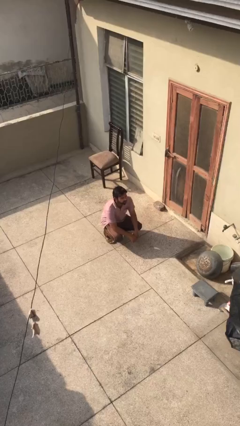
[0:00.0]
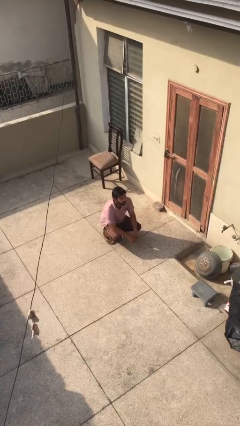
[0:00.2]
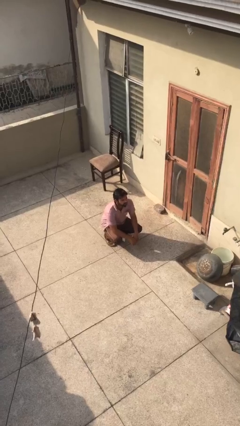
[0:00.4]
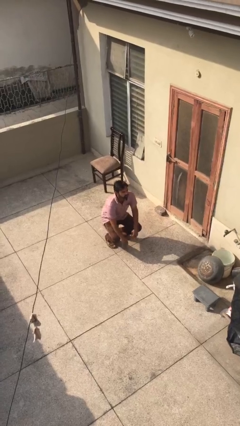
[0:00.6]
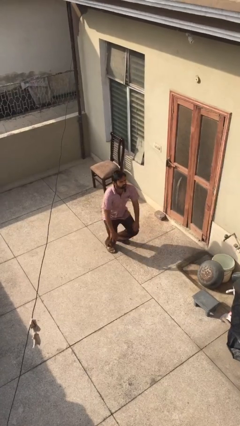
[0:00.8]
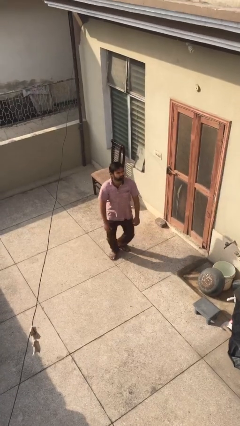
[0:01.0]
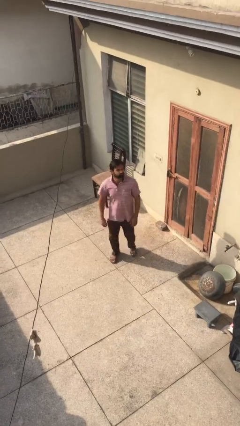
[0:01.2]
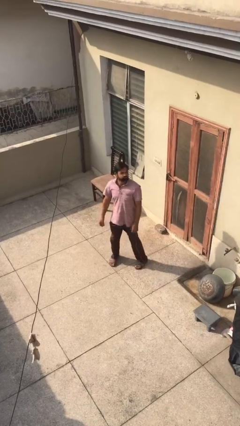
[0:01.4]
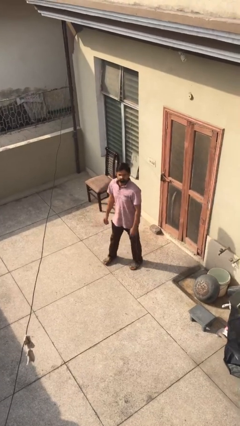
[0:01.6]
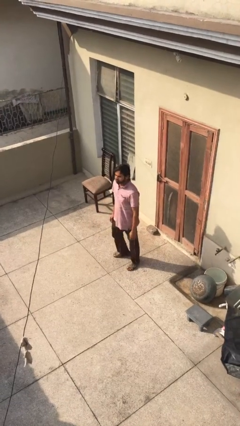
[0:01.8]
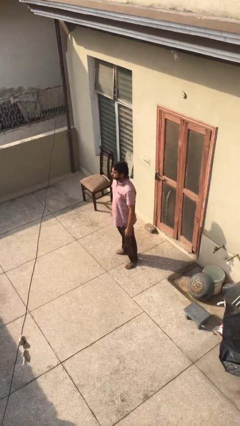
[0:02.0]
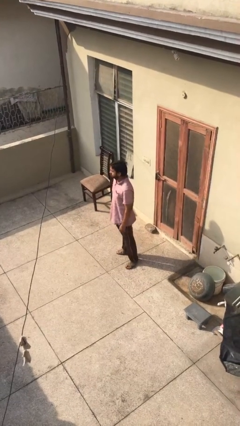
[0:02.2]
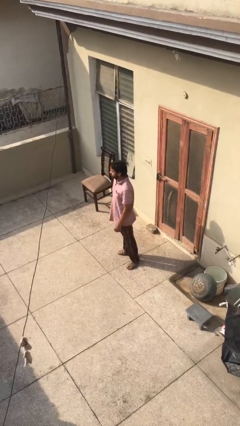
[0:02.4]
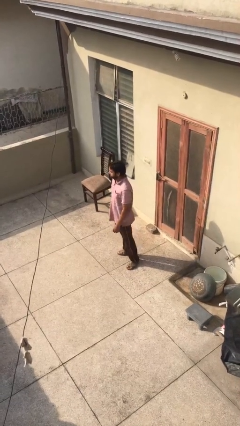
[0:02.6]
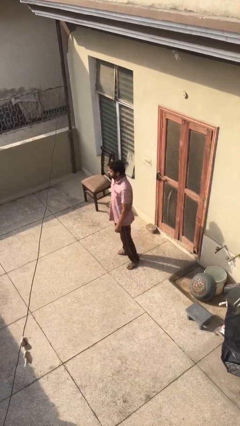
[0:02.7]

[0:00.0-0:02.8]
person stands up

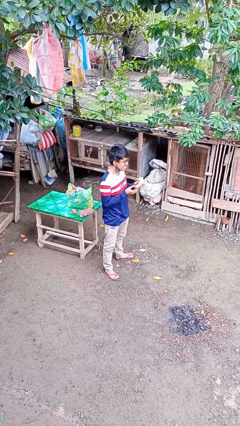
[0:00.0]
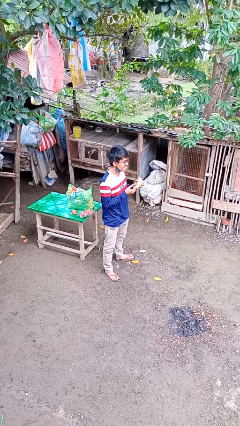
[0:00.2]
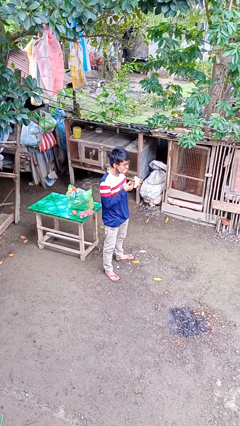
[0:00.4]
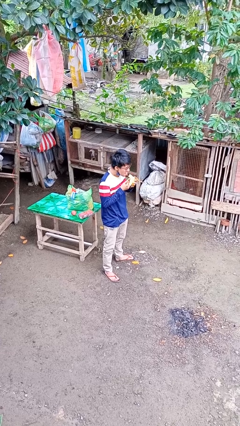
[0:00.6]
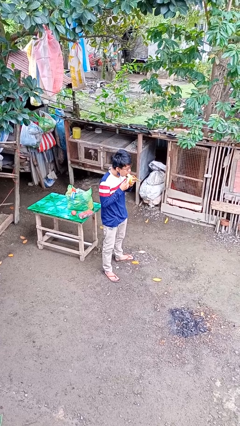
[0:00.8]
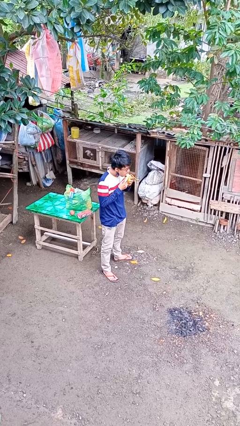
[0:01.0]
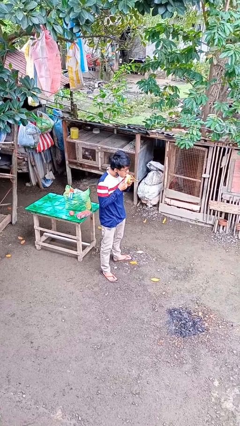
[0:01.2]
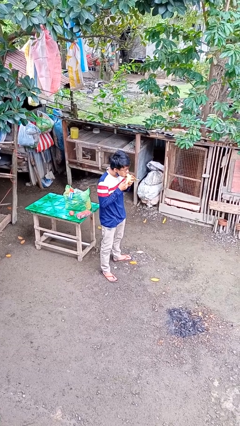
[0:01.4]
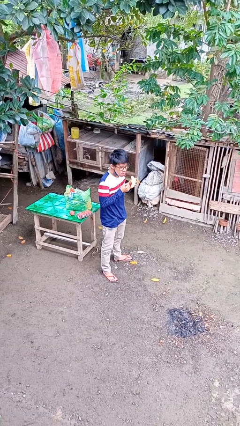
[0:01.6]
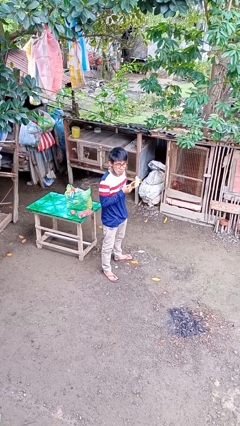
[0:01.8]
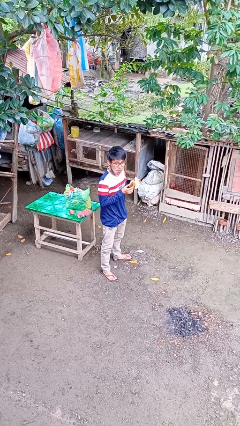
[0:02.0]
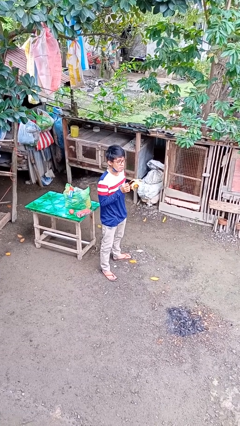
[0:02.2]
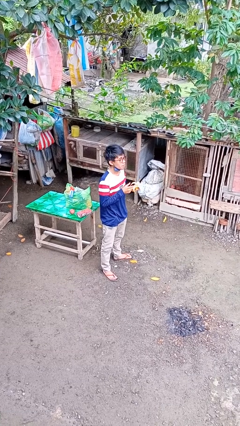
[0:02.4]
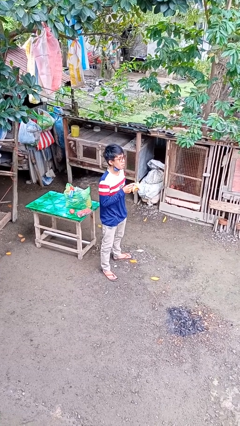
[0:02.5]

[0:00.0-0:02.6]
person eats banana

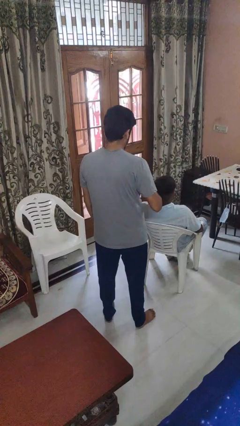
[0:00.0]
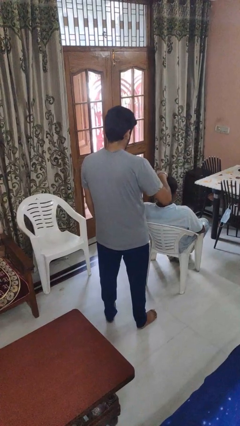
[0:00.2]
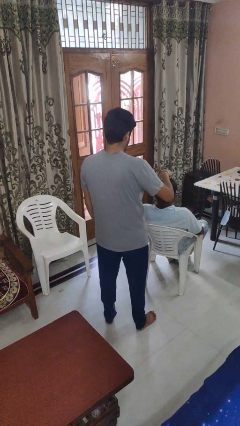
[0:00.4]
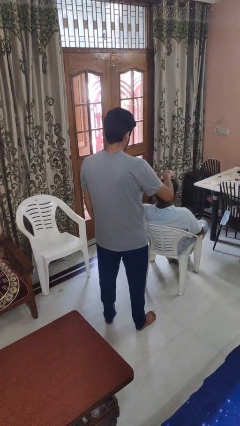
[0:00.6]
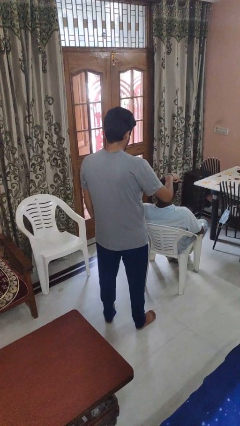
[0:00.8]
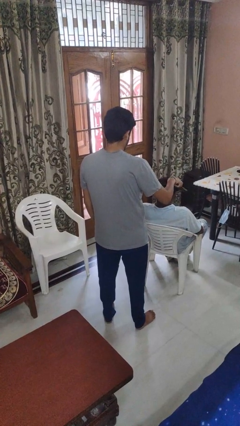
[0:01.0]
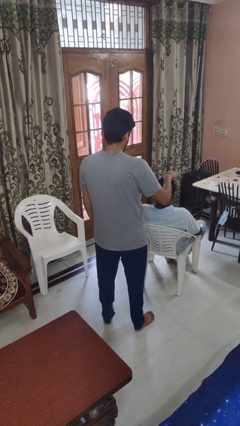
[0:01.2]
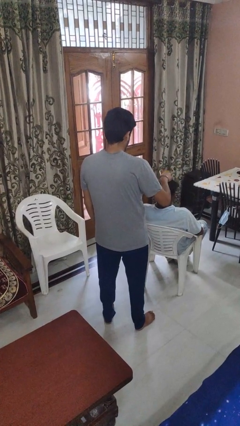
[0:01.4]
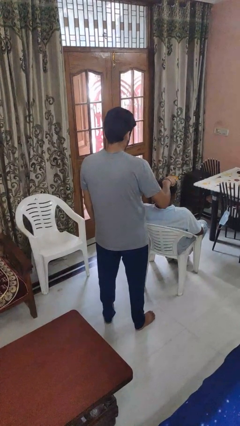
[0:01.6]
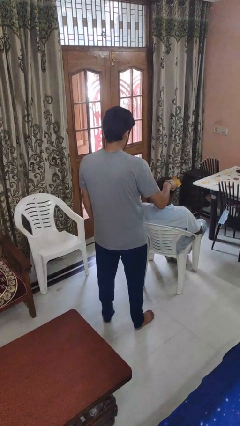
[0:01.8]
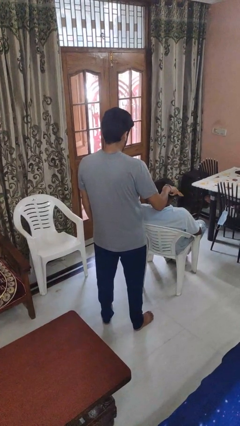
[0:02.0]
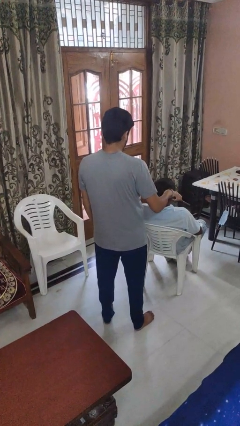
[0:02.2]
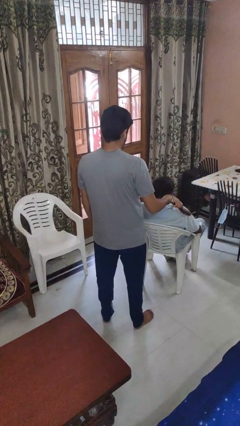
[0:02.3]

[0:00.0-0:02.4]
person brushes hair of person

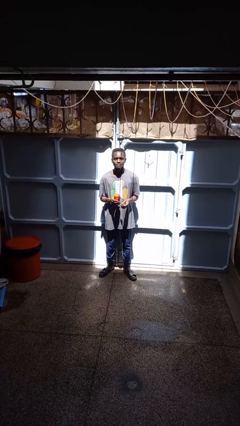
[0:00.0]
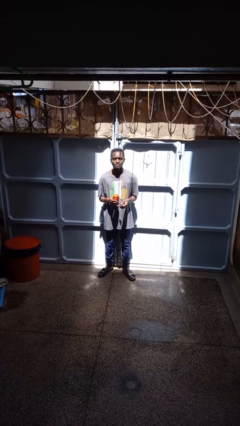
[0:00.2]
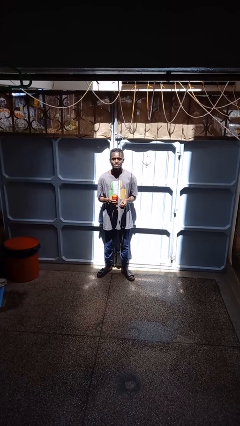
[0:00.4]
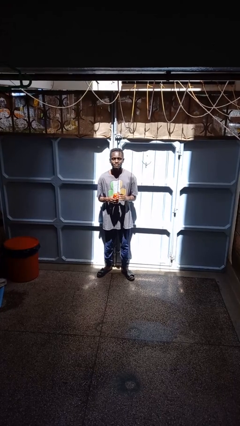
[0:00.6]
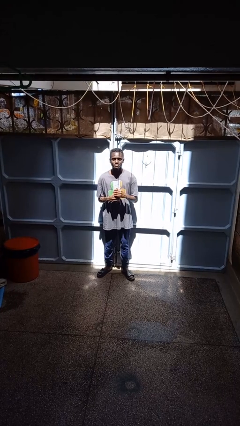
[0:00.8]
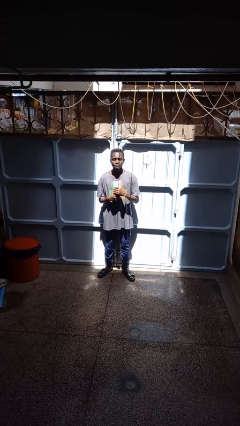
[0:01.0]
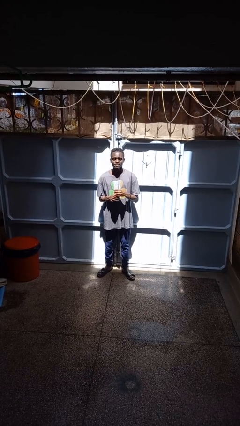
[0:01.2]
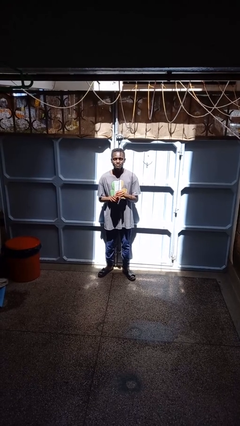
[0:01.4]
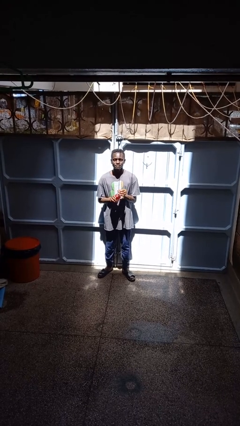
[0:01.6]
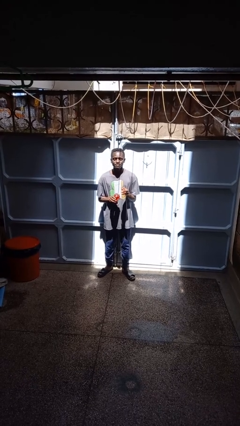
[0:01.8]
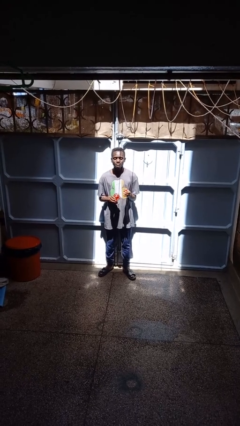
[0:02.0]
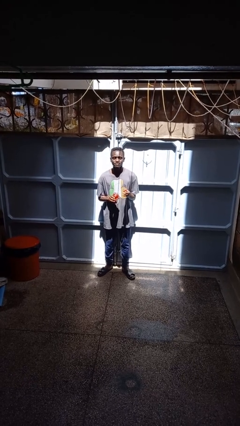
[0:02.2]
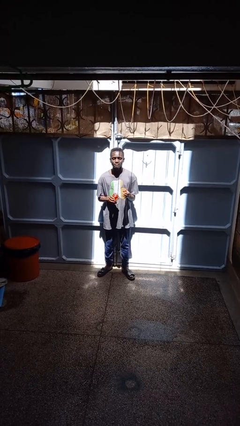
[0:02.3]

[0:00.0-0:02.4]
person opens jar

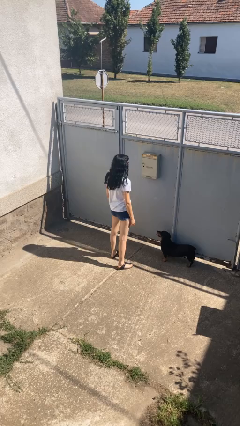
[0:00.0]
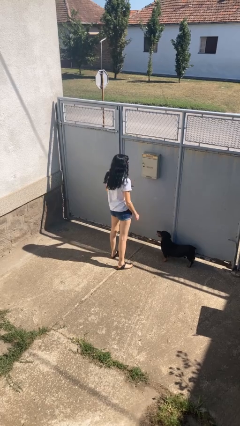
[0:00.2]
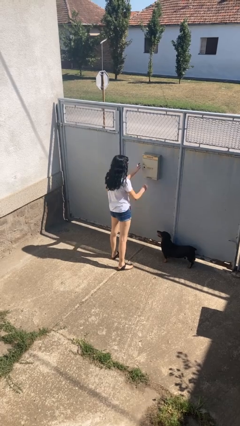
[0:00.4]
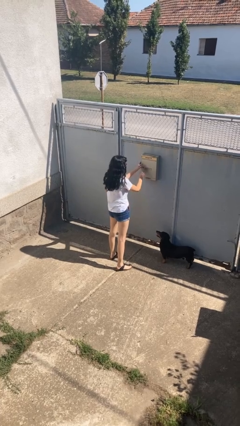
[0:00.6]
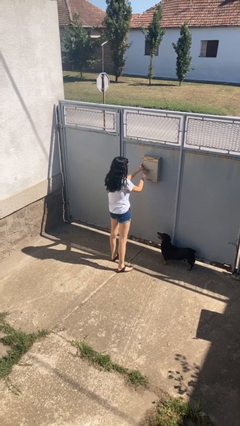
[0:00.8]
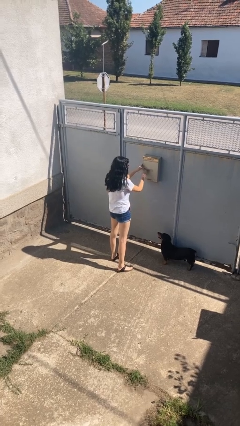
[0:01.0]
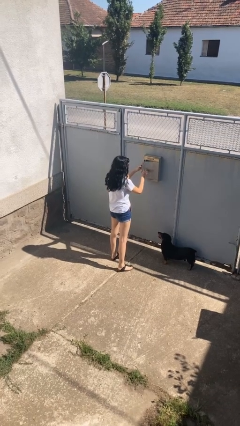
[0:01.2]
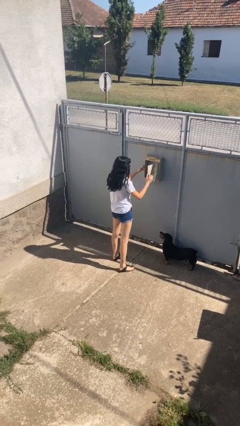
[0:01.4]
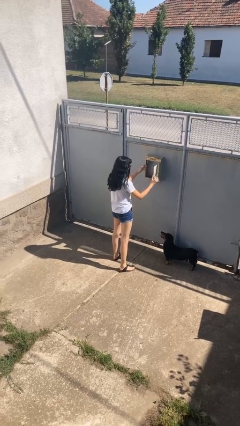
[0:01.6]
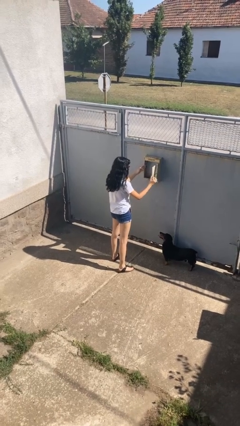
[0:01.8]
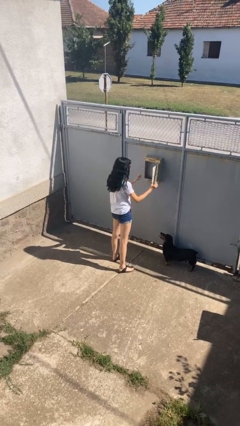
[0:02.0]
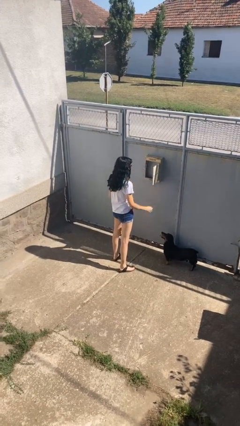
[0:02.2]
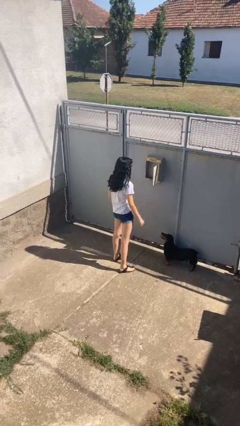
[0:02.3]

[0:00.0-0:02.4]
person opens mailbox

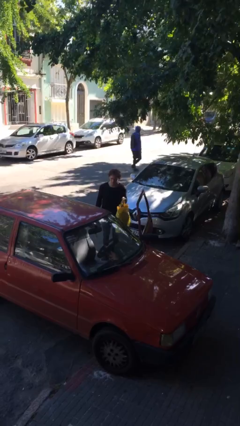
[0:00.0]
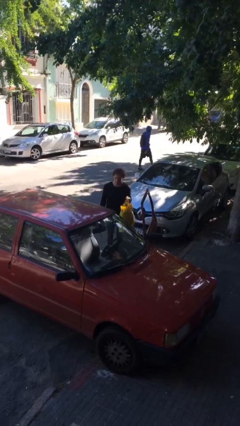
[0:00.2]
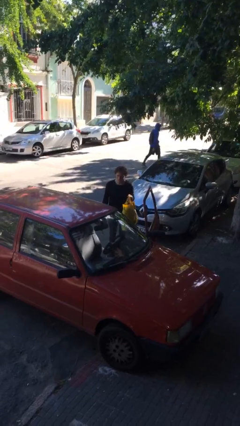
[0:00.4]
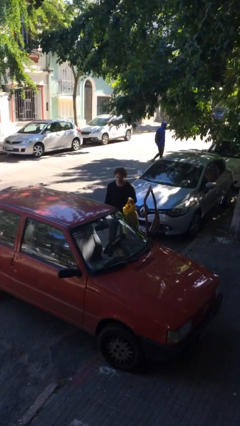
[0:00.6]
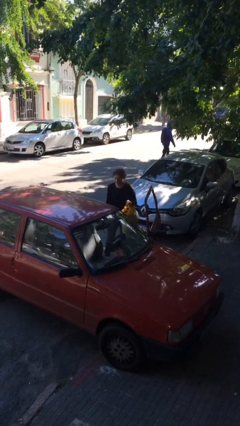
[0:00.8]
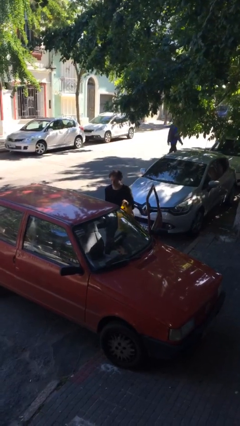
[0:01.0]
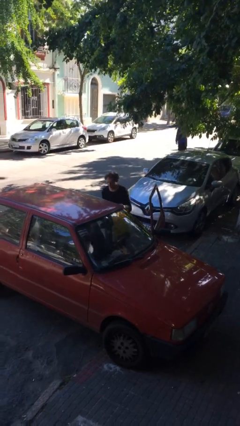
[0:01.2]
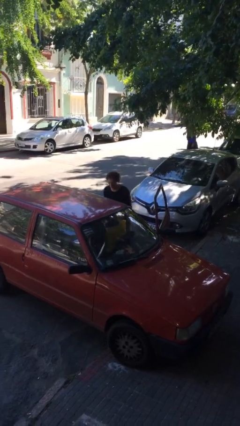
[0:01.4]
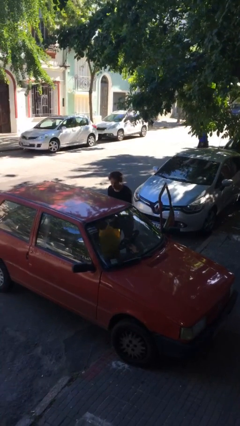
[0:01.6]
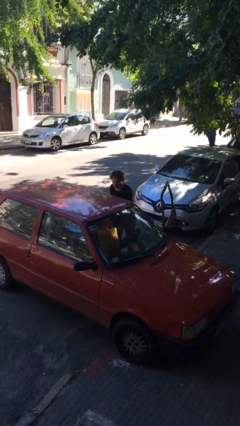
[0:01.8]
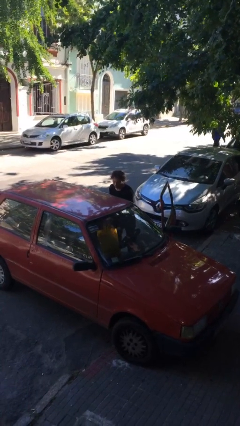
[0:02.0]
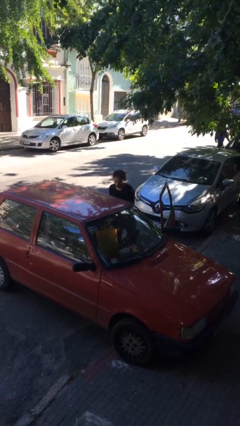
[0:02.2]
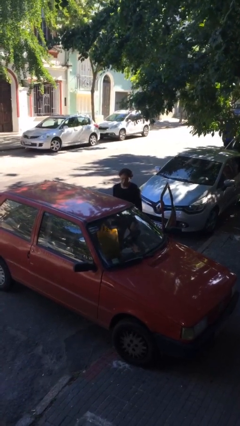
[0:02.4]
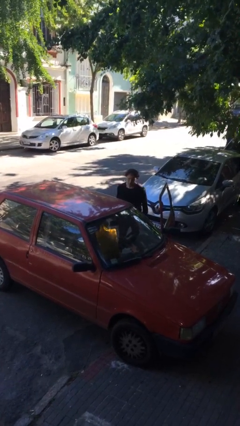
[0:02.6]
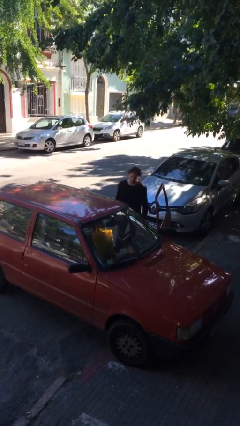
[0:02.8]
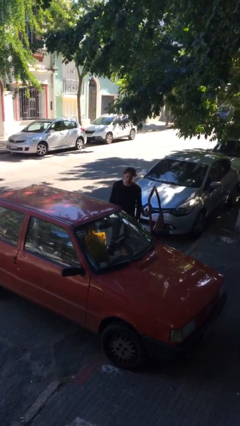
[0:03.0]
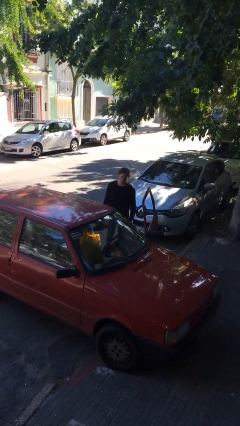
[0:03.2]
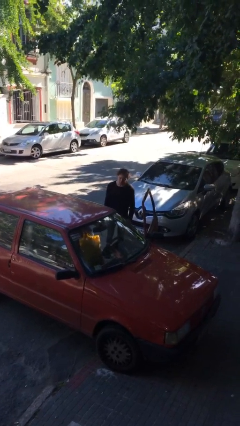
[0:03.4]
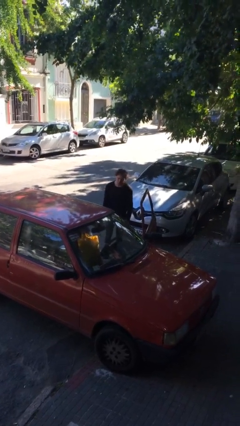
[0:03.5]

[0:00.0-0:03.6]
person loads car

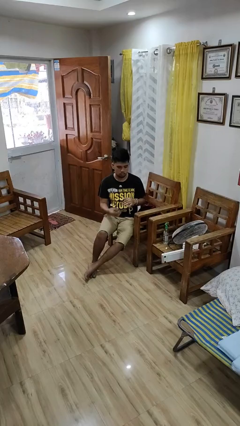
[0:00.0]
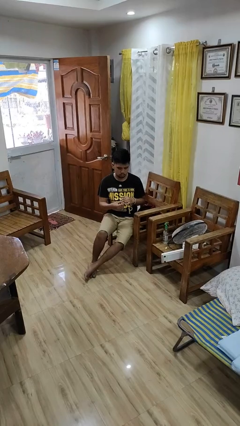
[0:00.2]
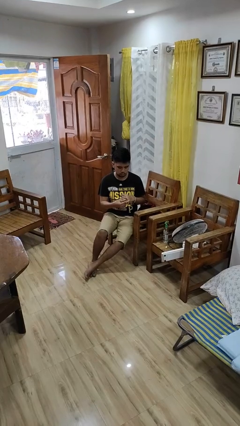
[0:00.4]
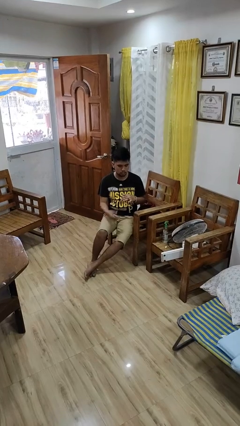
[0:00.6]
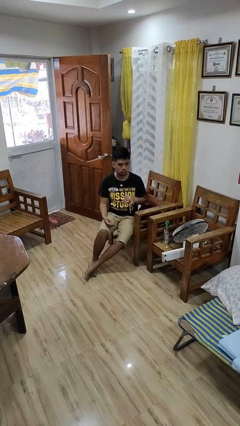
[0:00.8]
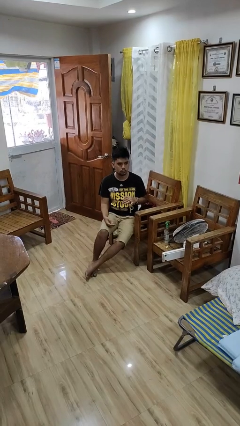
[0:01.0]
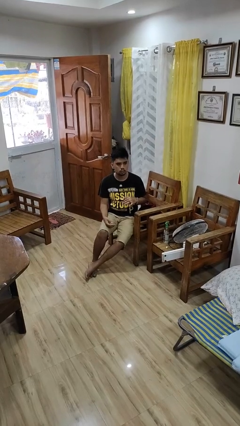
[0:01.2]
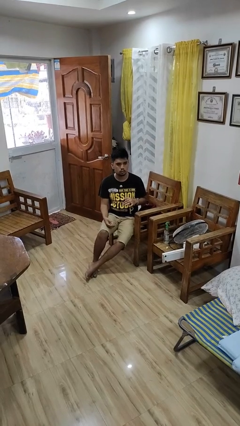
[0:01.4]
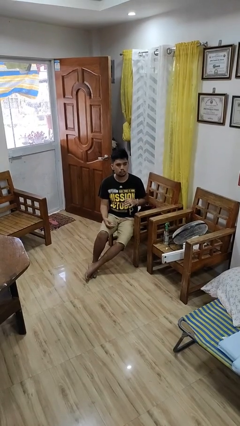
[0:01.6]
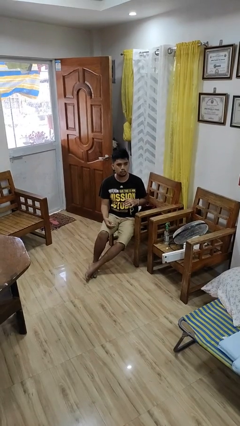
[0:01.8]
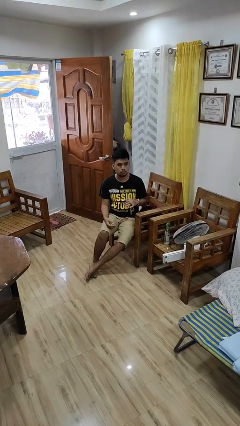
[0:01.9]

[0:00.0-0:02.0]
person puts on ring
